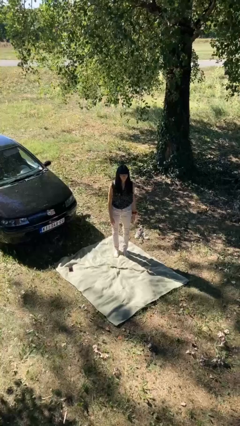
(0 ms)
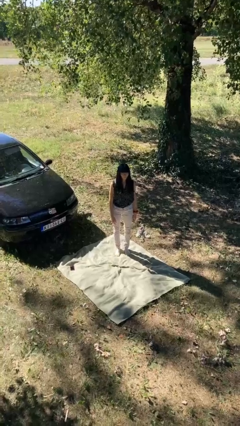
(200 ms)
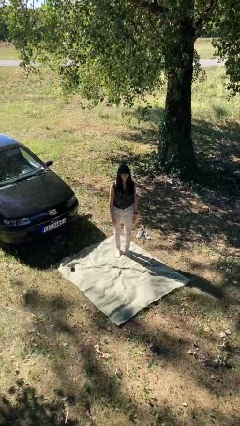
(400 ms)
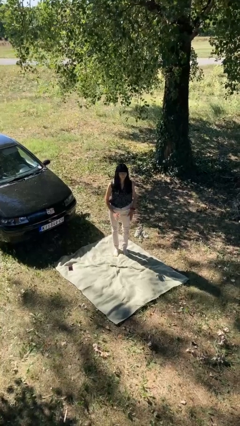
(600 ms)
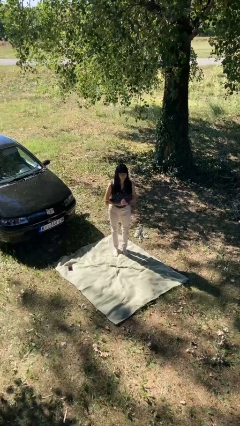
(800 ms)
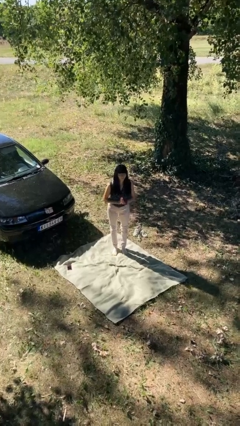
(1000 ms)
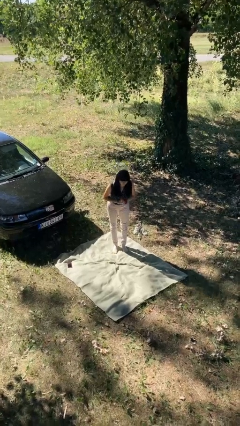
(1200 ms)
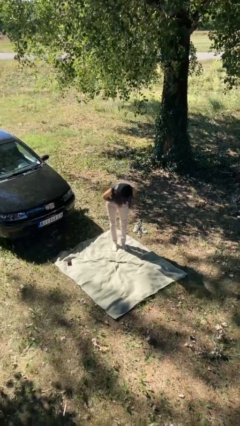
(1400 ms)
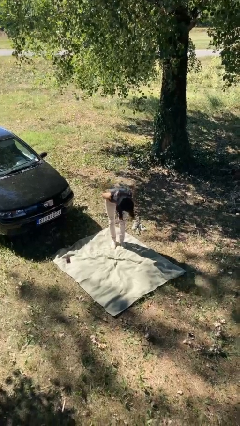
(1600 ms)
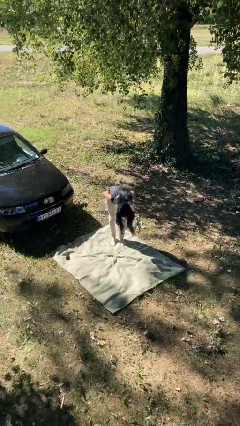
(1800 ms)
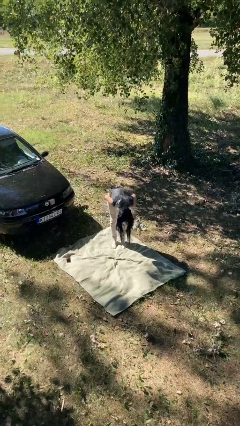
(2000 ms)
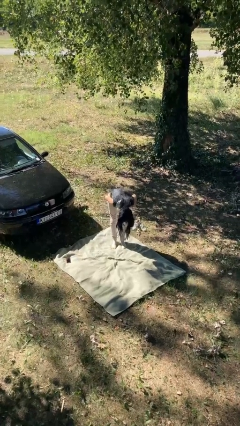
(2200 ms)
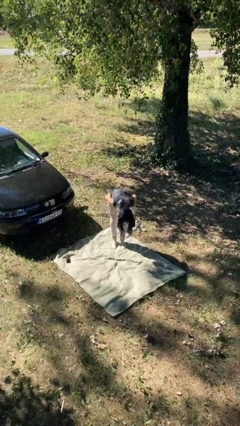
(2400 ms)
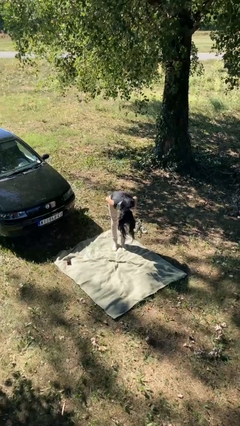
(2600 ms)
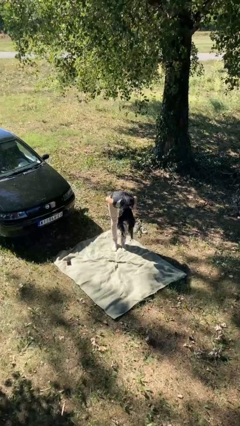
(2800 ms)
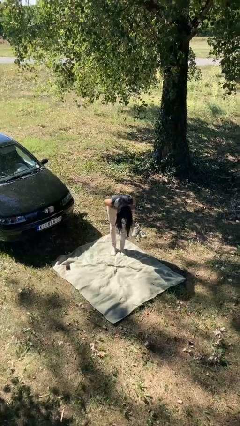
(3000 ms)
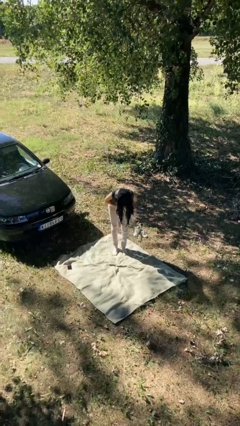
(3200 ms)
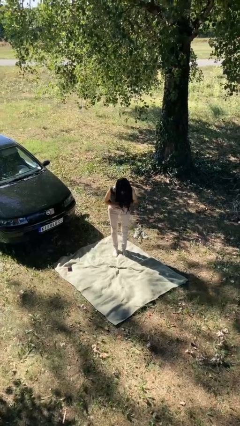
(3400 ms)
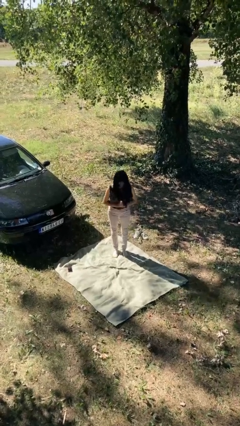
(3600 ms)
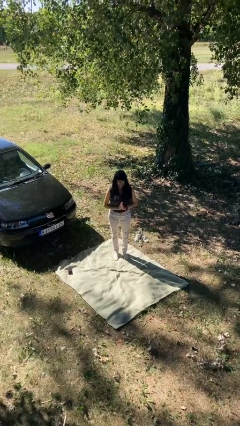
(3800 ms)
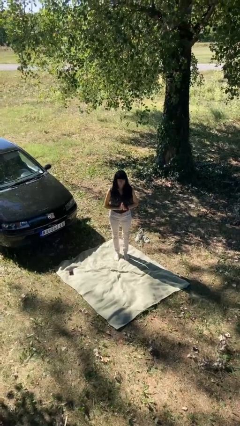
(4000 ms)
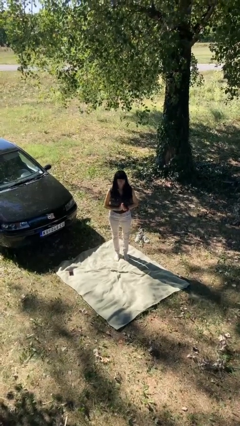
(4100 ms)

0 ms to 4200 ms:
person bows

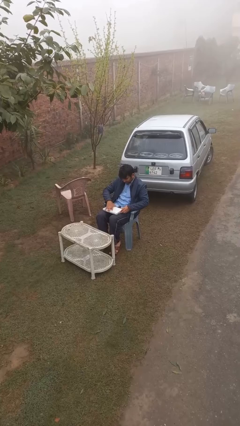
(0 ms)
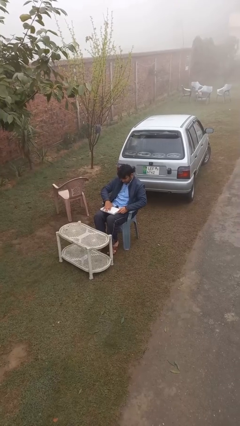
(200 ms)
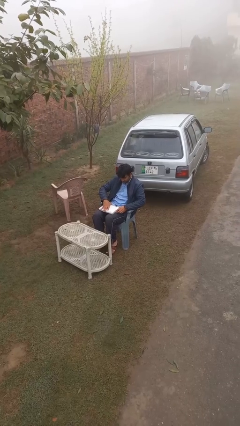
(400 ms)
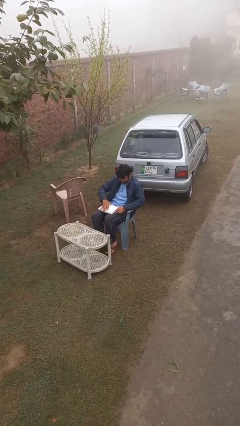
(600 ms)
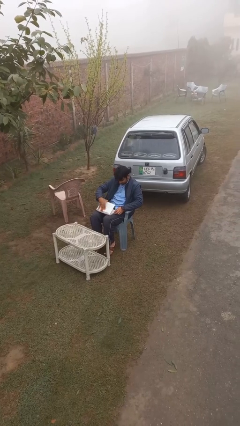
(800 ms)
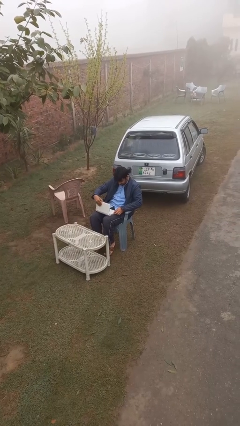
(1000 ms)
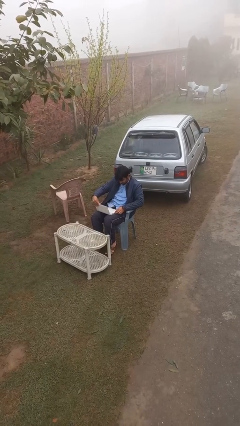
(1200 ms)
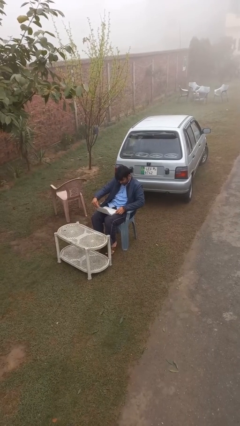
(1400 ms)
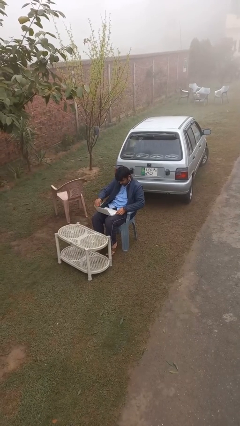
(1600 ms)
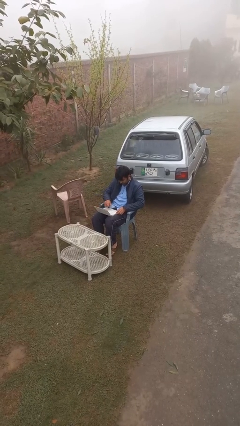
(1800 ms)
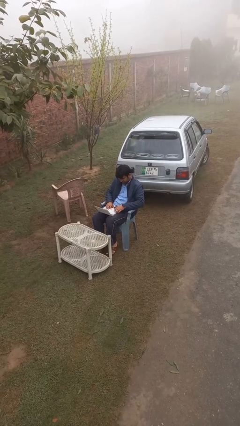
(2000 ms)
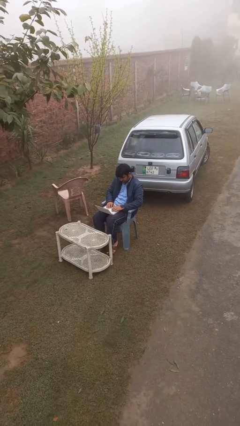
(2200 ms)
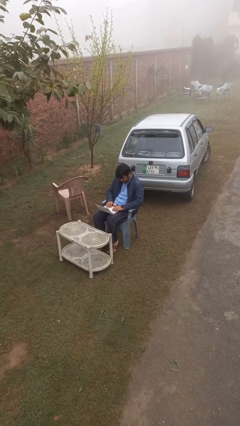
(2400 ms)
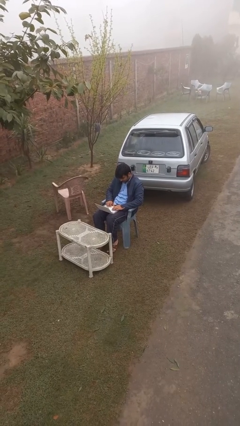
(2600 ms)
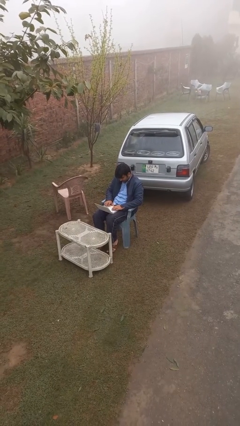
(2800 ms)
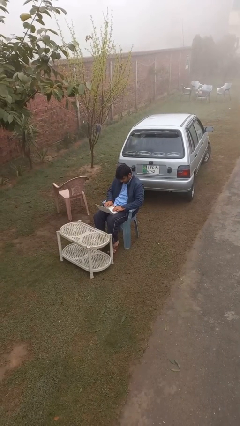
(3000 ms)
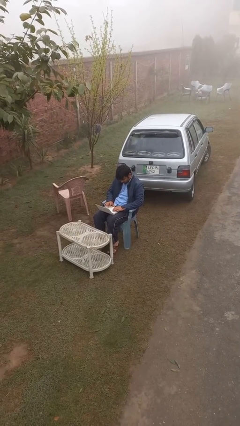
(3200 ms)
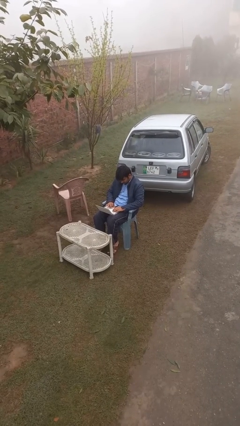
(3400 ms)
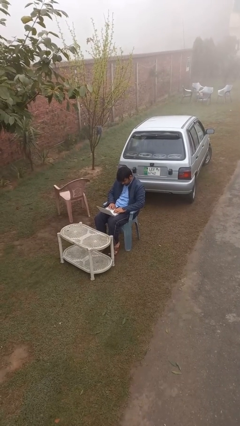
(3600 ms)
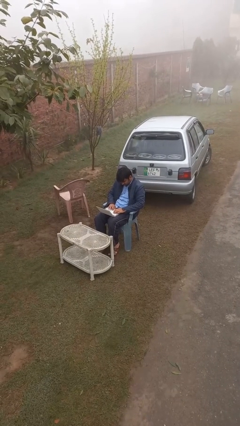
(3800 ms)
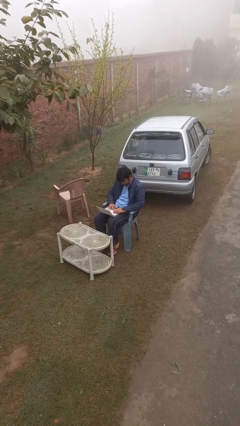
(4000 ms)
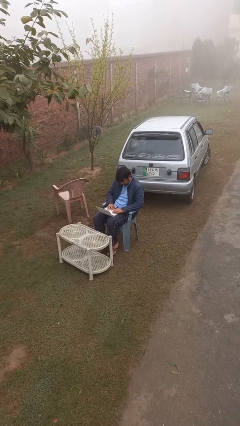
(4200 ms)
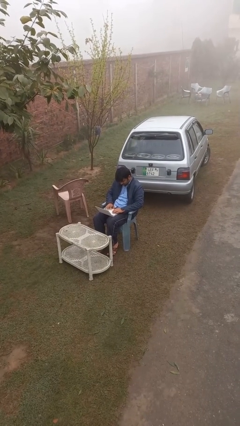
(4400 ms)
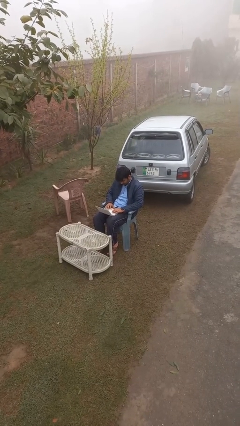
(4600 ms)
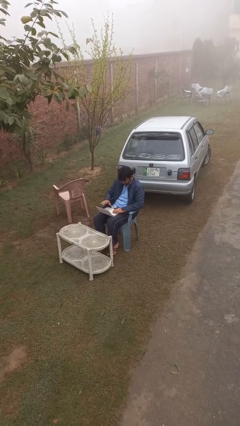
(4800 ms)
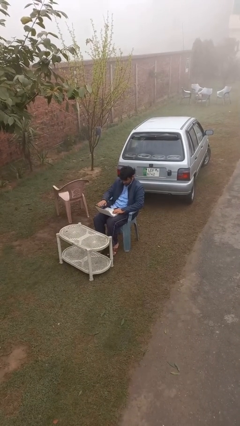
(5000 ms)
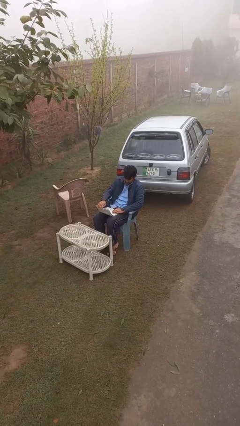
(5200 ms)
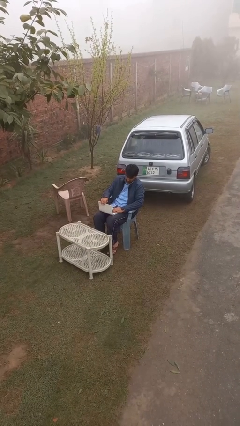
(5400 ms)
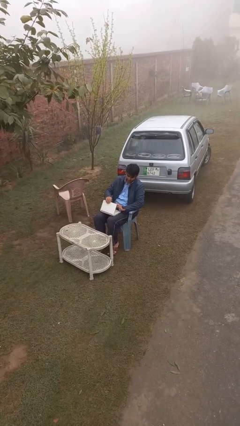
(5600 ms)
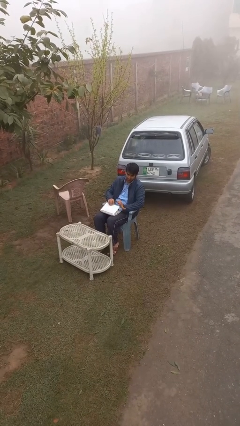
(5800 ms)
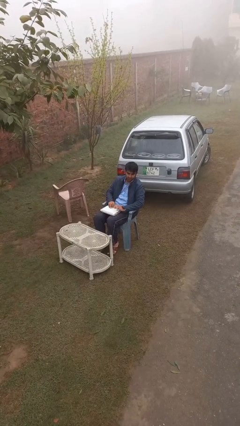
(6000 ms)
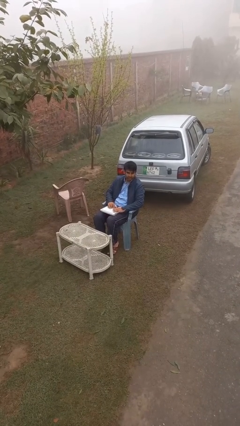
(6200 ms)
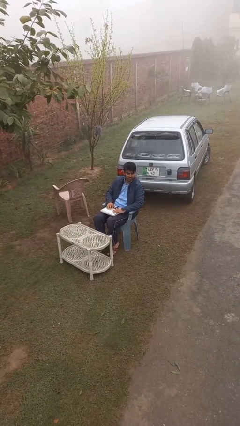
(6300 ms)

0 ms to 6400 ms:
person interacts with laptop

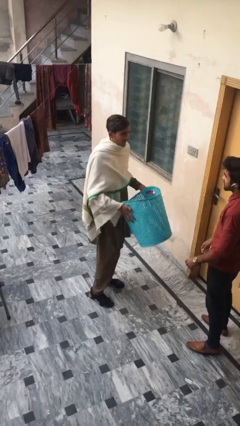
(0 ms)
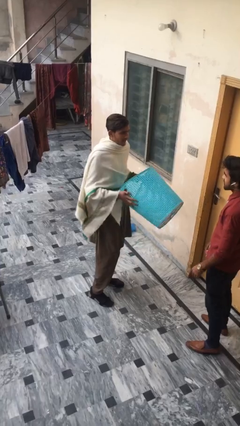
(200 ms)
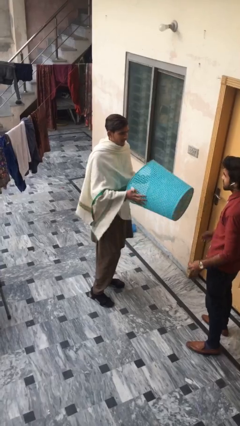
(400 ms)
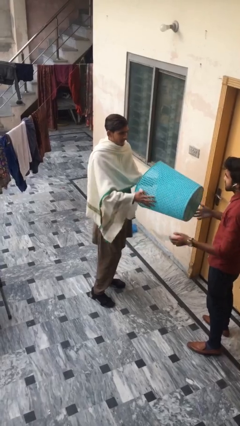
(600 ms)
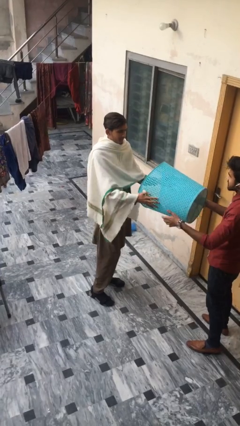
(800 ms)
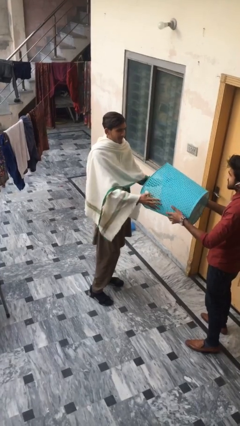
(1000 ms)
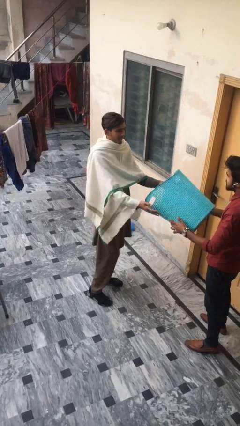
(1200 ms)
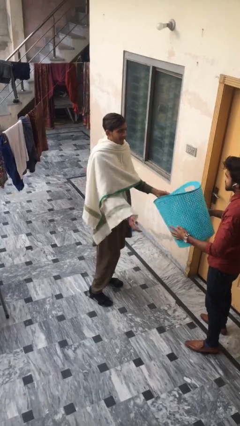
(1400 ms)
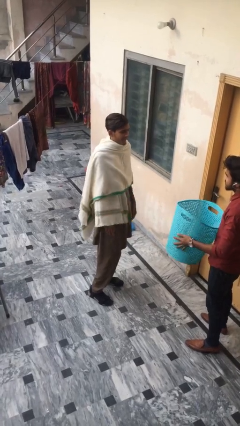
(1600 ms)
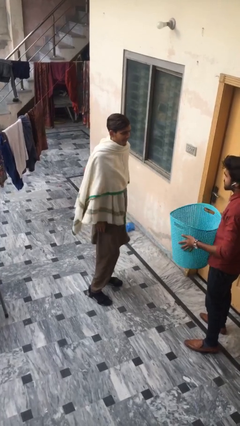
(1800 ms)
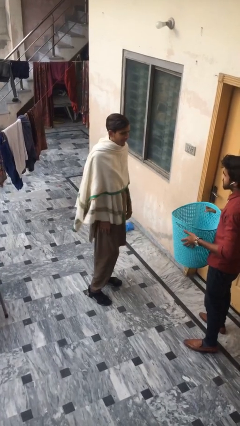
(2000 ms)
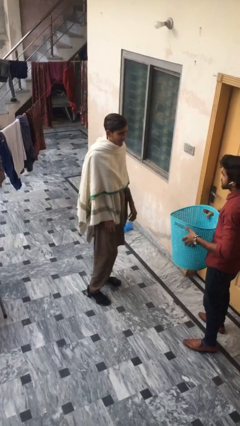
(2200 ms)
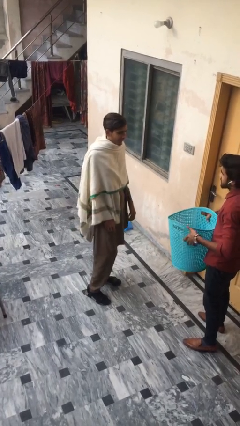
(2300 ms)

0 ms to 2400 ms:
person transfers object to person

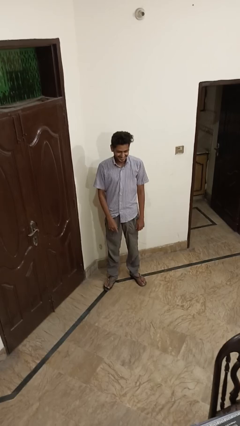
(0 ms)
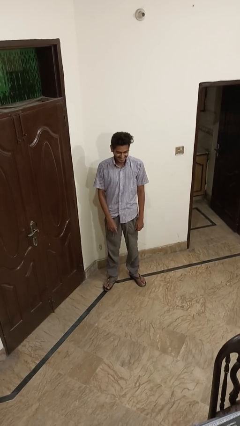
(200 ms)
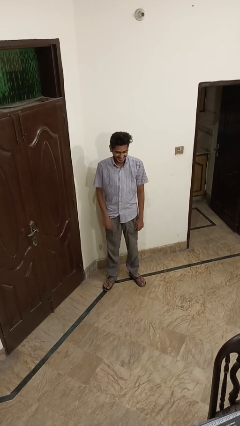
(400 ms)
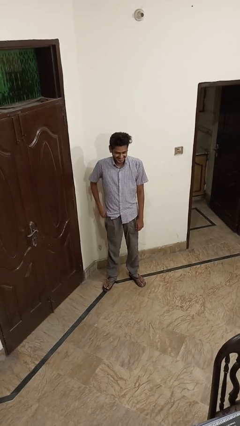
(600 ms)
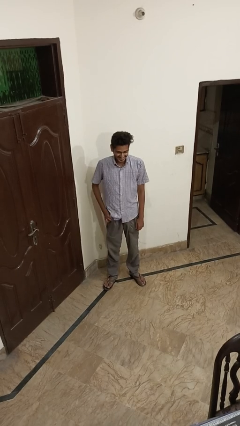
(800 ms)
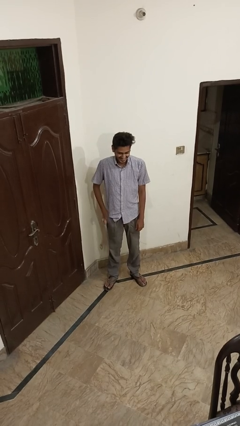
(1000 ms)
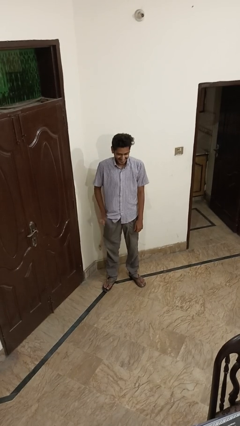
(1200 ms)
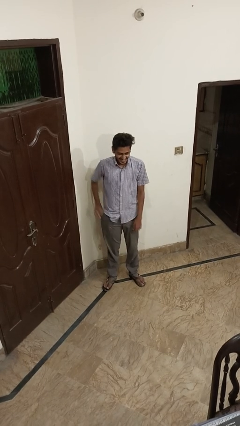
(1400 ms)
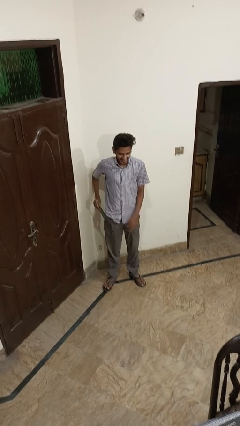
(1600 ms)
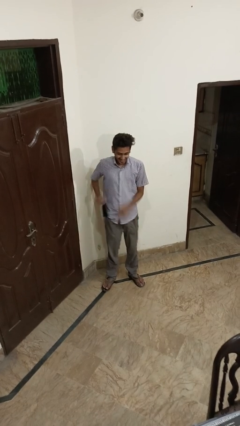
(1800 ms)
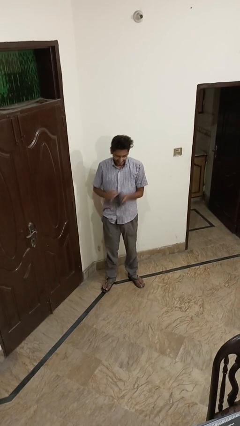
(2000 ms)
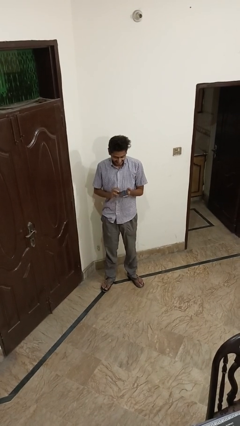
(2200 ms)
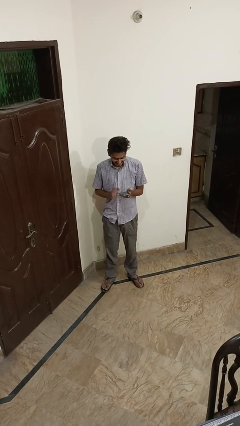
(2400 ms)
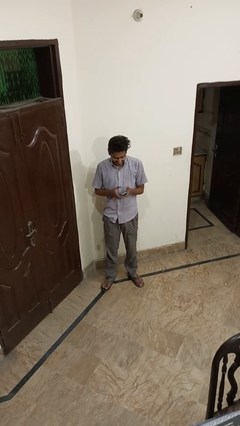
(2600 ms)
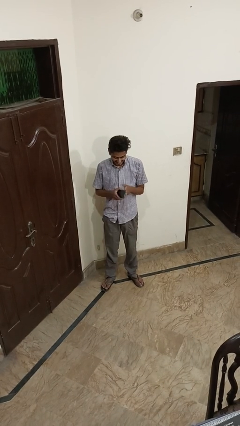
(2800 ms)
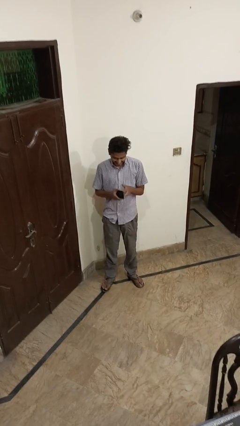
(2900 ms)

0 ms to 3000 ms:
person takes phone from pocket

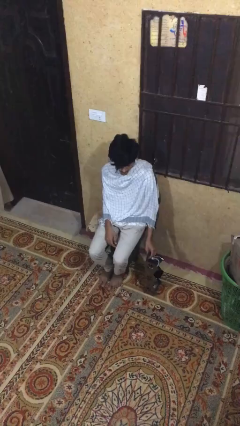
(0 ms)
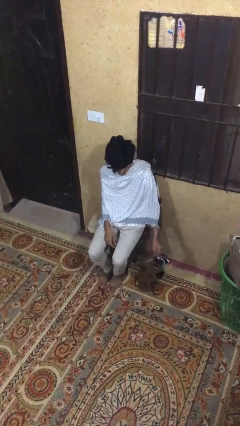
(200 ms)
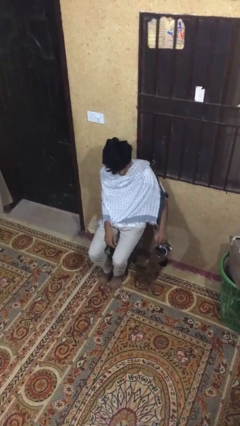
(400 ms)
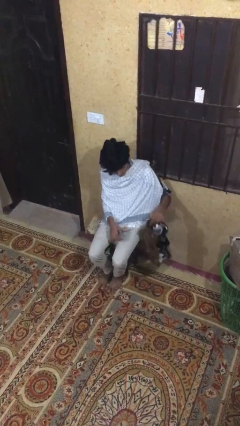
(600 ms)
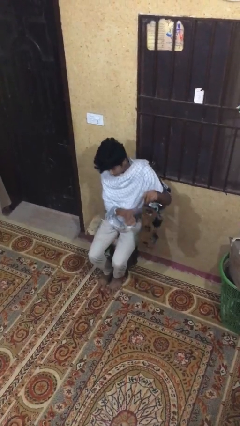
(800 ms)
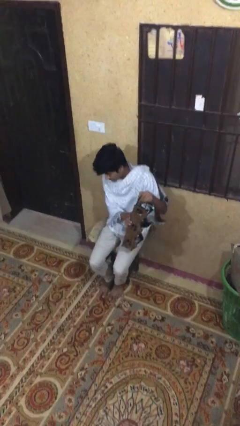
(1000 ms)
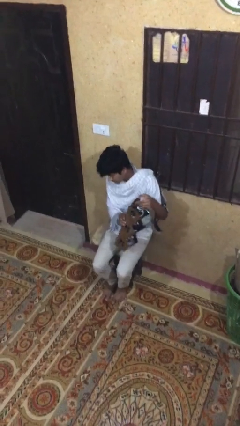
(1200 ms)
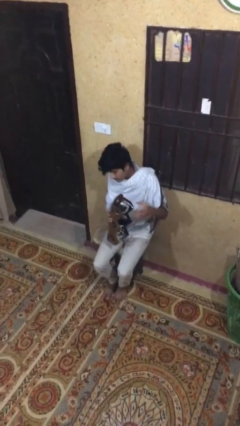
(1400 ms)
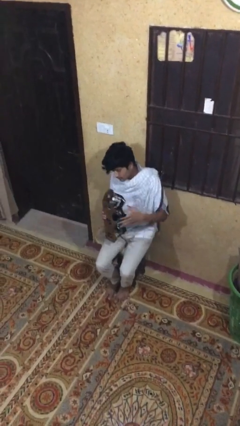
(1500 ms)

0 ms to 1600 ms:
person picks up object from floor
